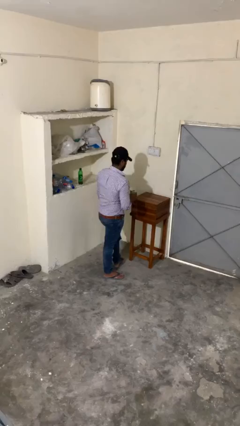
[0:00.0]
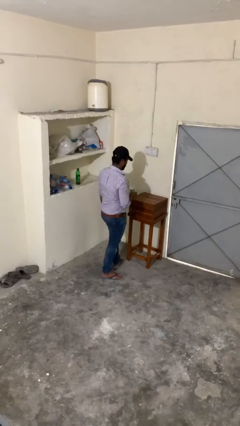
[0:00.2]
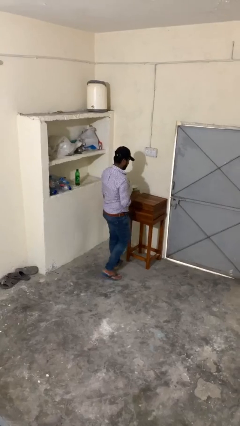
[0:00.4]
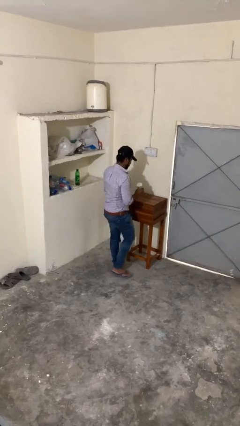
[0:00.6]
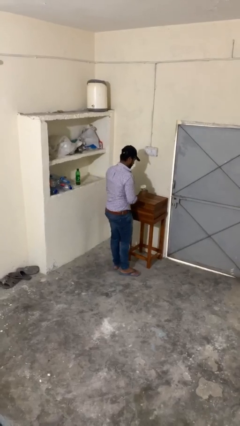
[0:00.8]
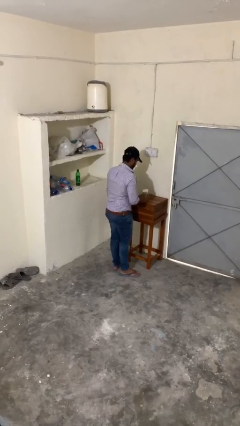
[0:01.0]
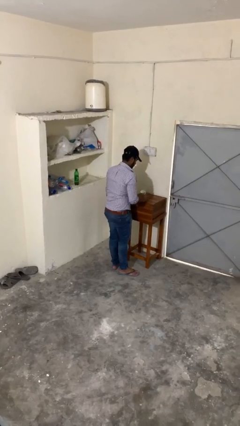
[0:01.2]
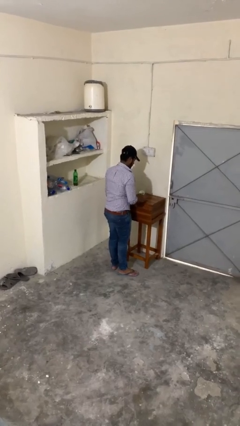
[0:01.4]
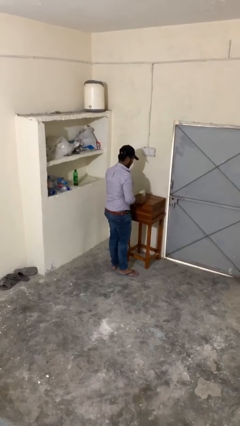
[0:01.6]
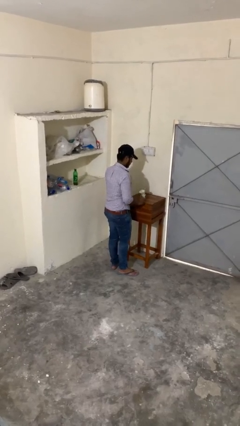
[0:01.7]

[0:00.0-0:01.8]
person puts down object on table

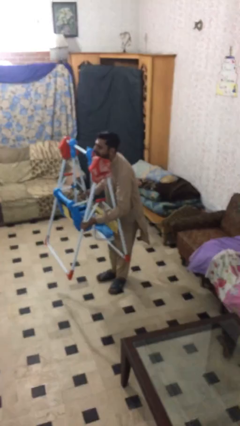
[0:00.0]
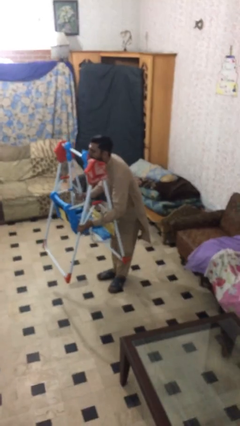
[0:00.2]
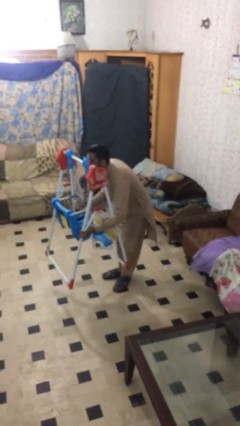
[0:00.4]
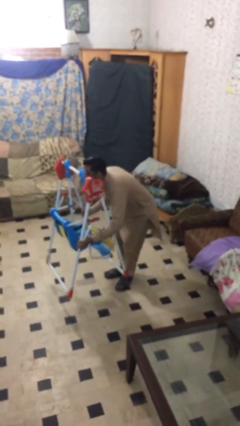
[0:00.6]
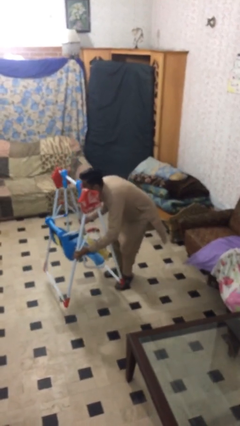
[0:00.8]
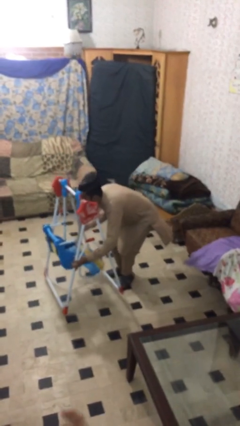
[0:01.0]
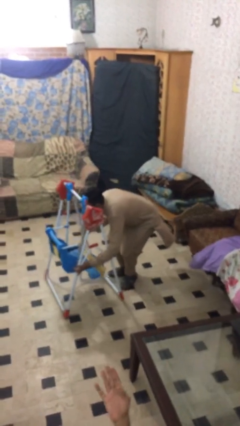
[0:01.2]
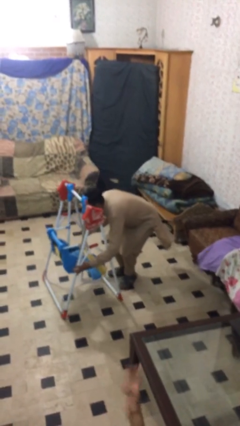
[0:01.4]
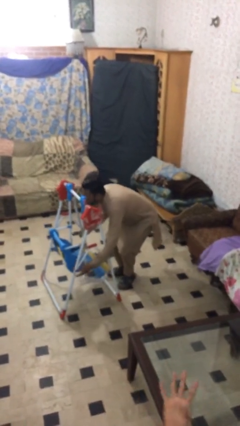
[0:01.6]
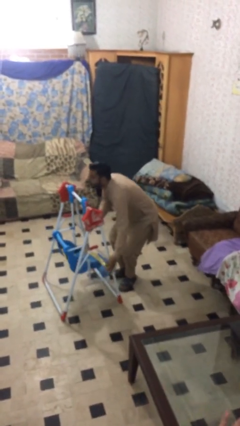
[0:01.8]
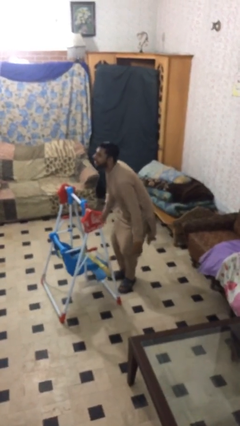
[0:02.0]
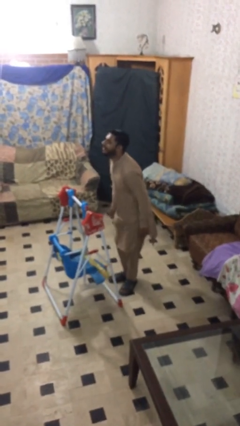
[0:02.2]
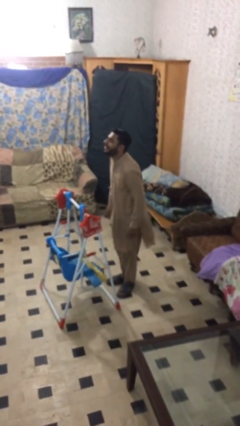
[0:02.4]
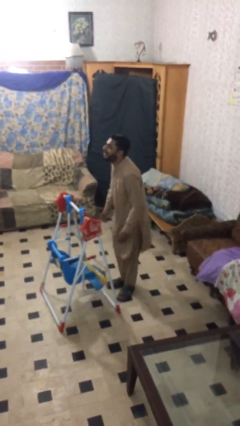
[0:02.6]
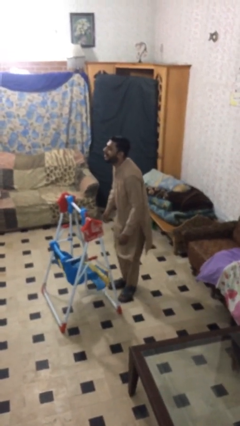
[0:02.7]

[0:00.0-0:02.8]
person puts down object on floor

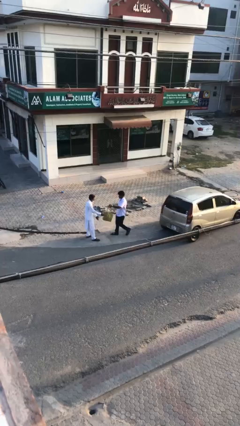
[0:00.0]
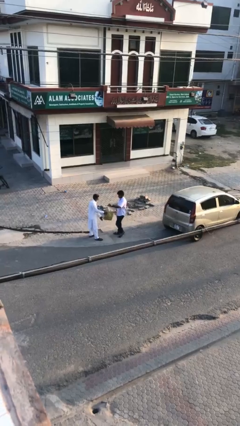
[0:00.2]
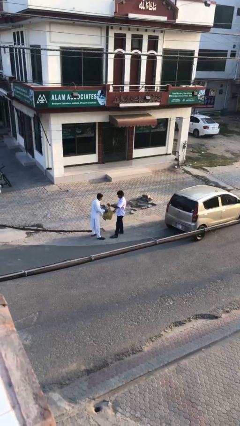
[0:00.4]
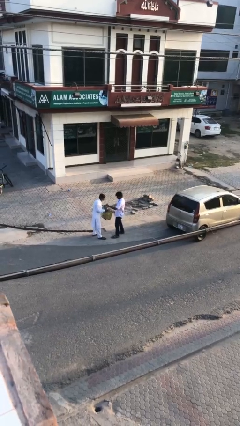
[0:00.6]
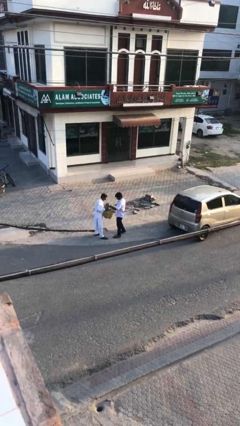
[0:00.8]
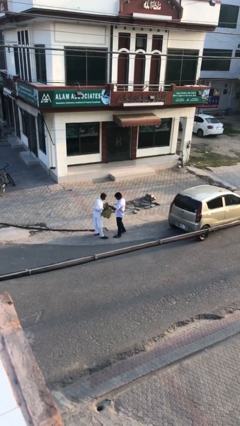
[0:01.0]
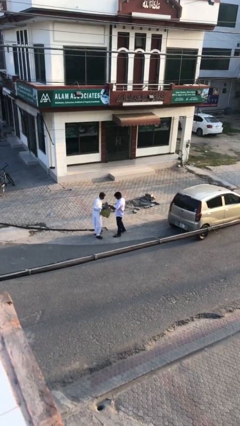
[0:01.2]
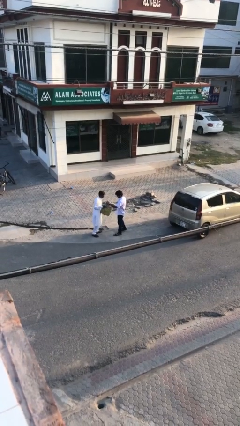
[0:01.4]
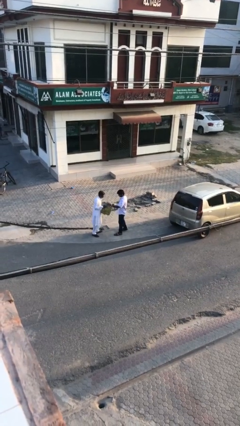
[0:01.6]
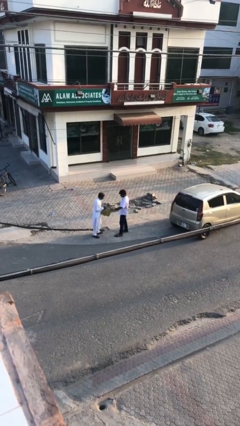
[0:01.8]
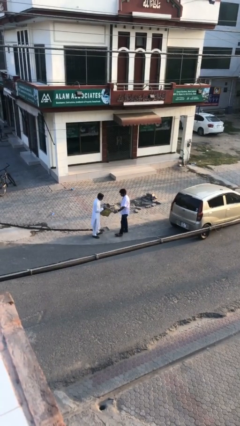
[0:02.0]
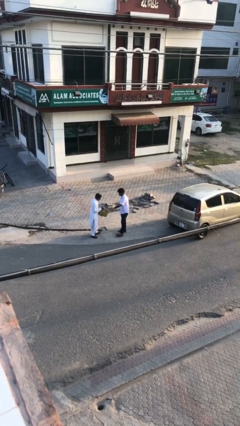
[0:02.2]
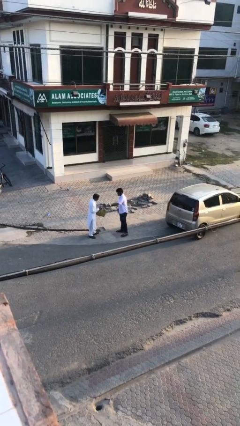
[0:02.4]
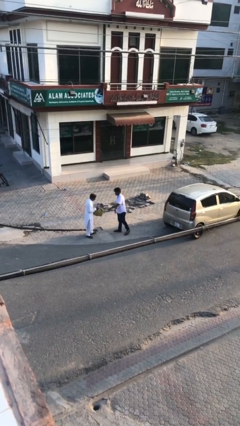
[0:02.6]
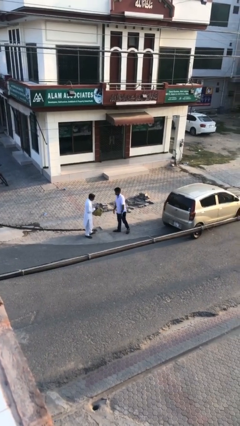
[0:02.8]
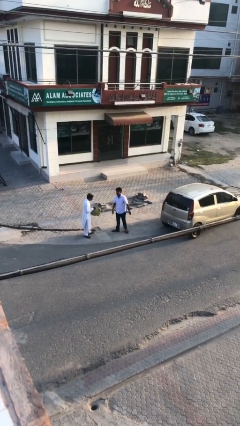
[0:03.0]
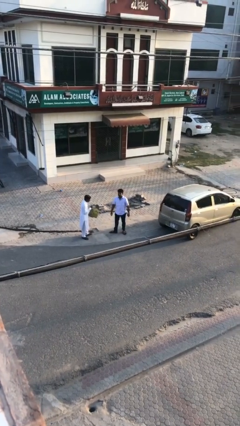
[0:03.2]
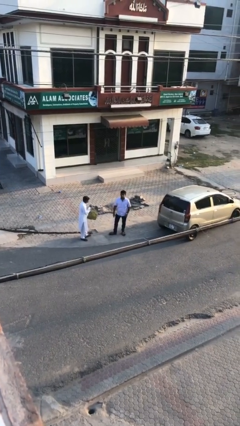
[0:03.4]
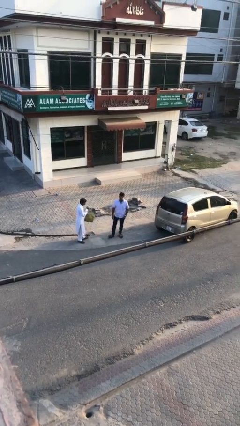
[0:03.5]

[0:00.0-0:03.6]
person transfers object to person

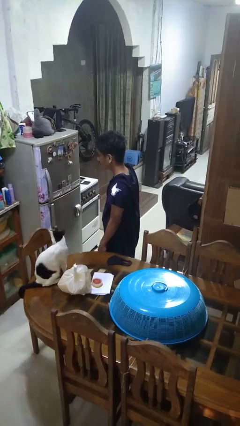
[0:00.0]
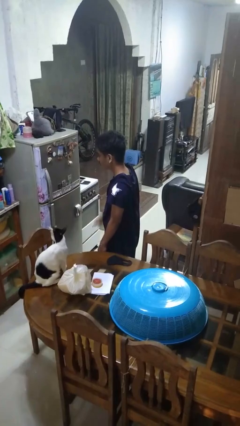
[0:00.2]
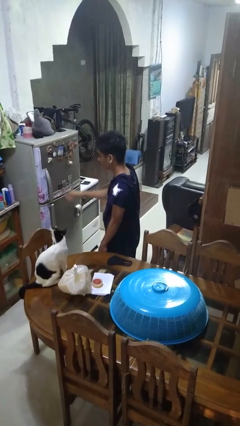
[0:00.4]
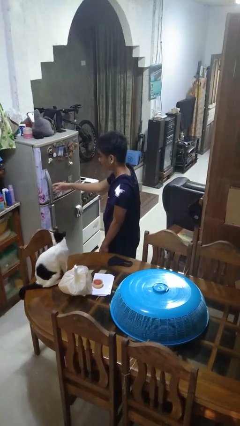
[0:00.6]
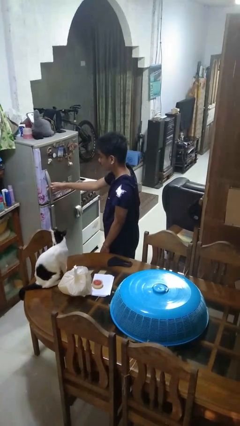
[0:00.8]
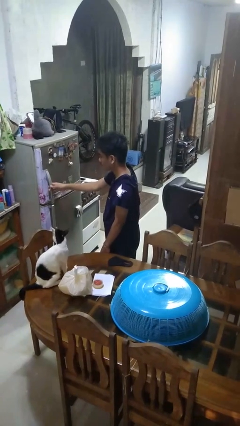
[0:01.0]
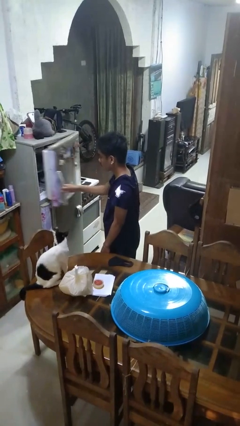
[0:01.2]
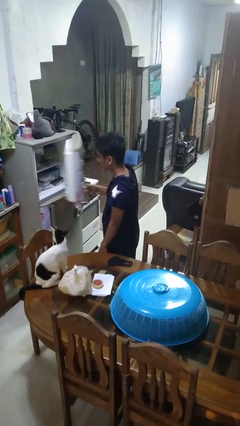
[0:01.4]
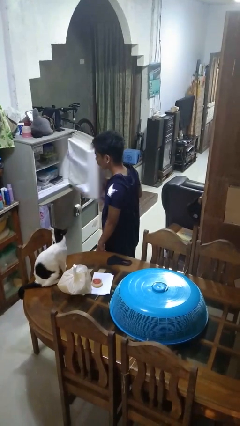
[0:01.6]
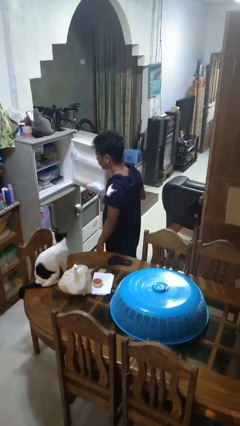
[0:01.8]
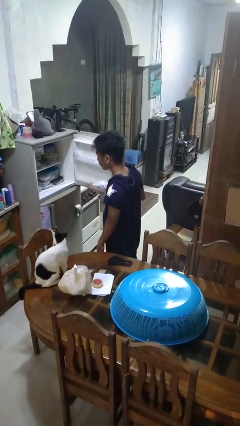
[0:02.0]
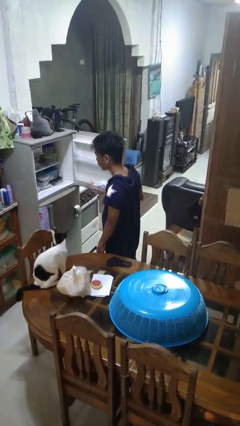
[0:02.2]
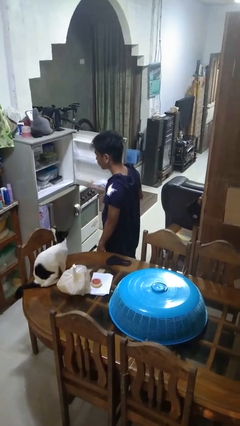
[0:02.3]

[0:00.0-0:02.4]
person opens refrigerator

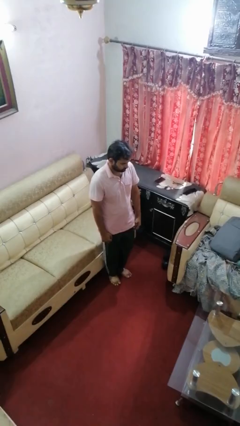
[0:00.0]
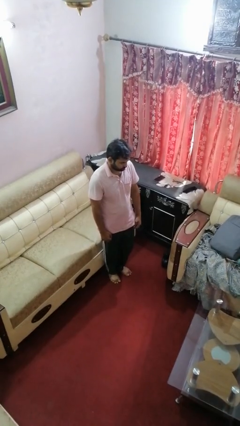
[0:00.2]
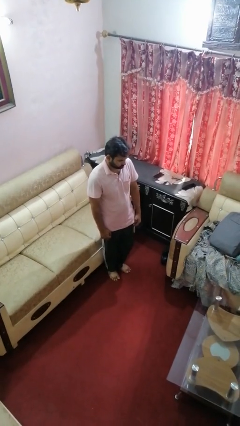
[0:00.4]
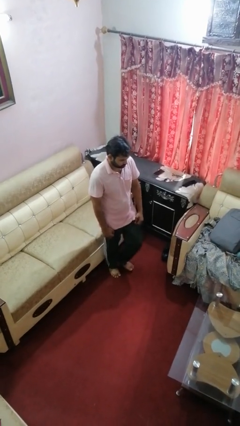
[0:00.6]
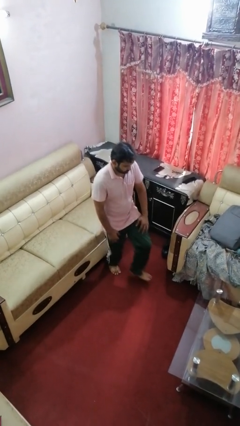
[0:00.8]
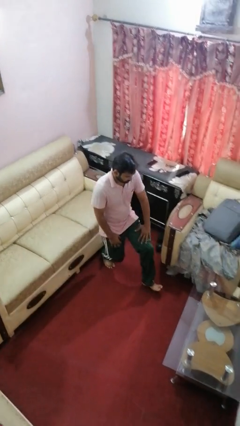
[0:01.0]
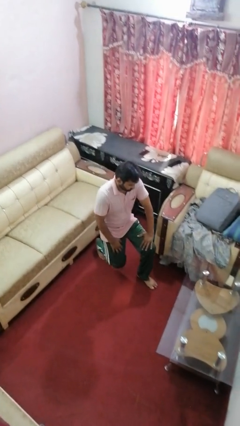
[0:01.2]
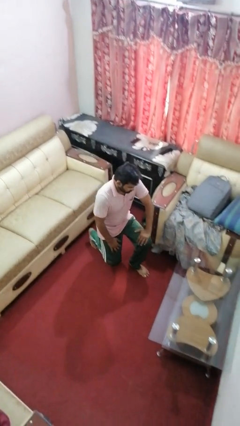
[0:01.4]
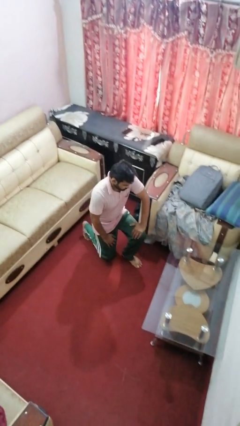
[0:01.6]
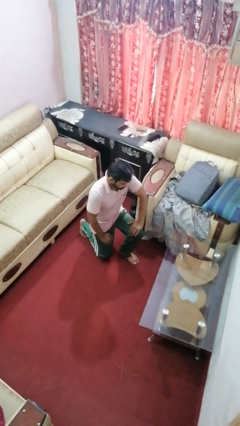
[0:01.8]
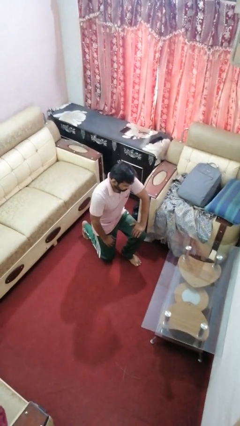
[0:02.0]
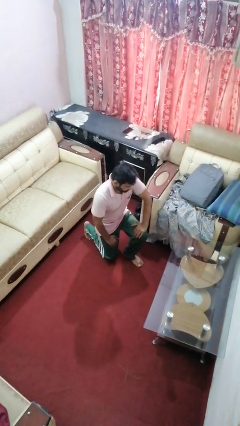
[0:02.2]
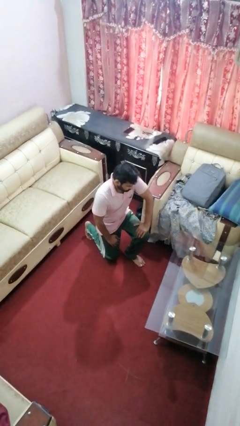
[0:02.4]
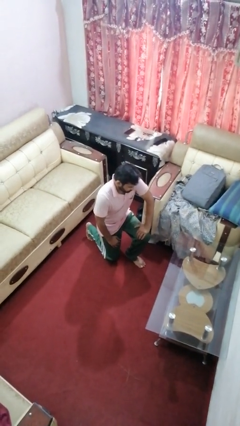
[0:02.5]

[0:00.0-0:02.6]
person kneels

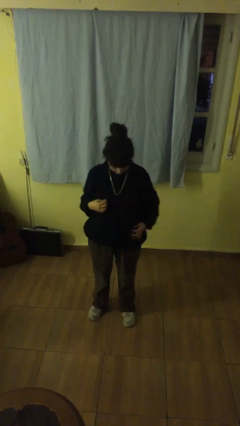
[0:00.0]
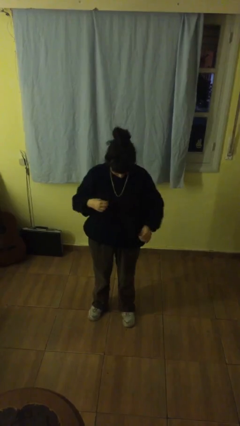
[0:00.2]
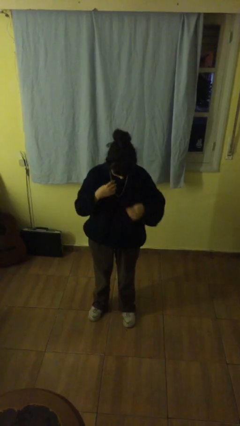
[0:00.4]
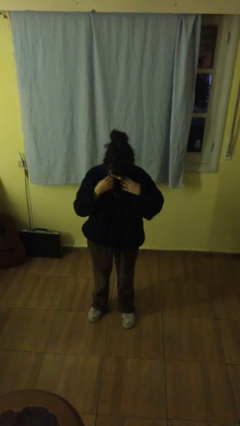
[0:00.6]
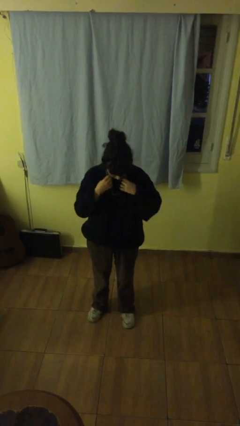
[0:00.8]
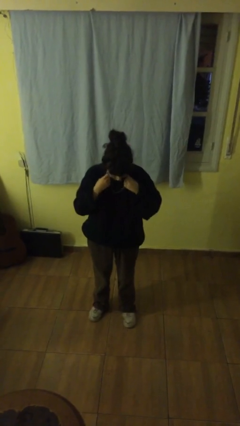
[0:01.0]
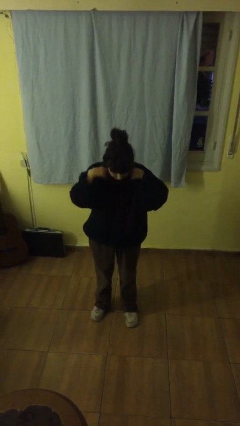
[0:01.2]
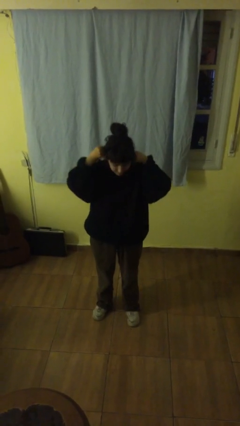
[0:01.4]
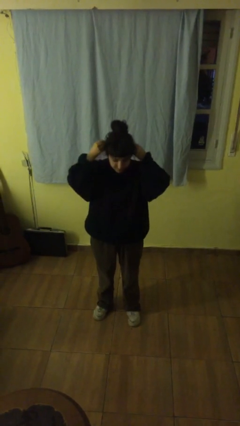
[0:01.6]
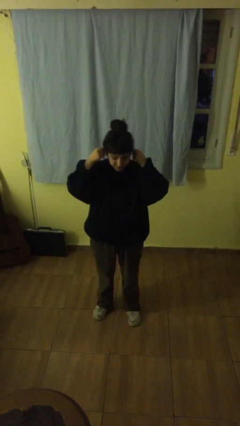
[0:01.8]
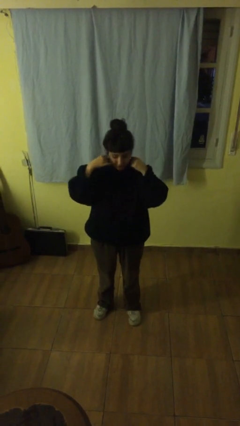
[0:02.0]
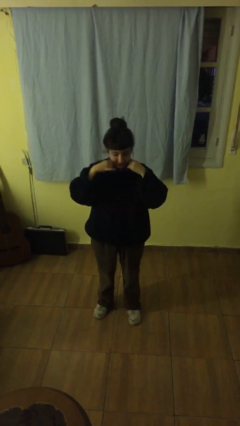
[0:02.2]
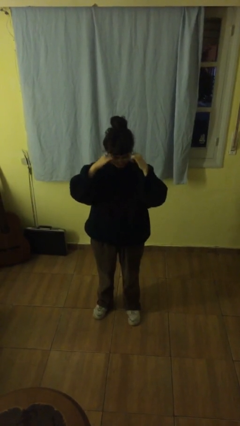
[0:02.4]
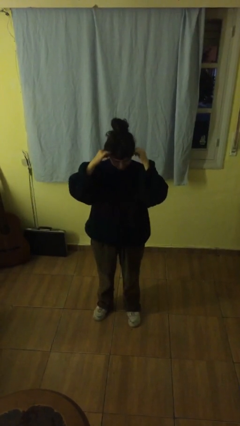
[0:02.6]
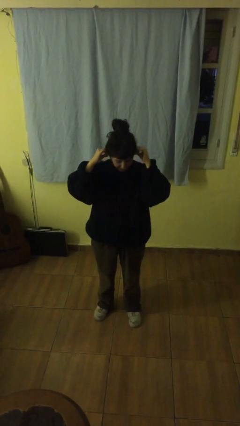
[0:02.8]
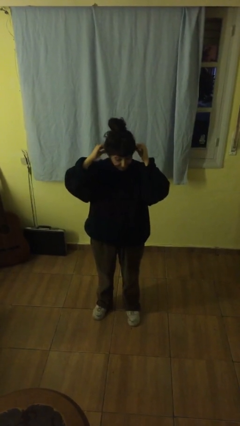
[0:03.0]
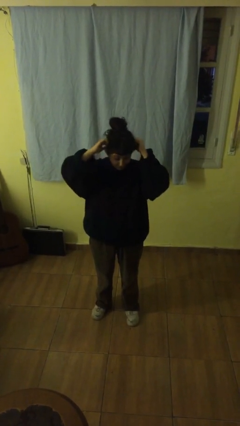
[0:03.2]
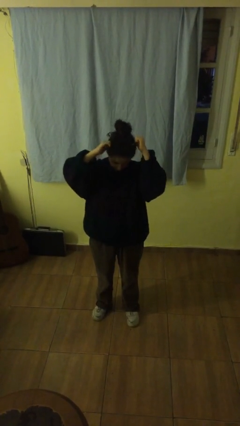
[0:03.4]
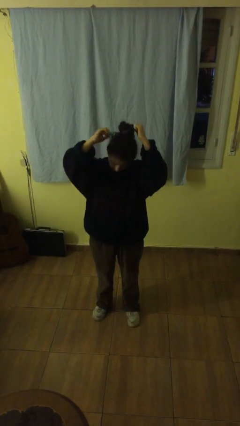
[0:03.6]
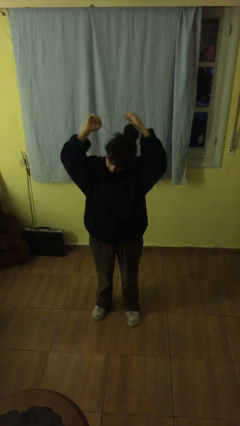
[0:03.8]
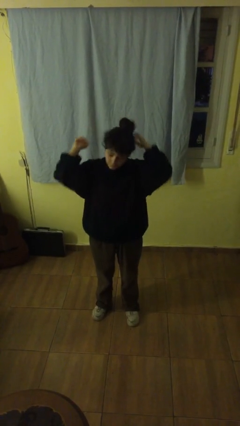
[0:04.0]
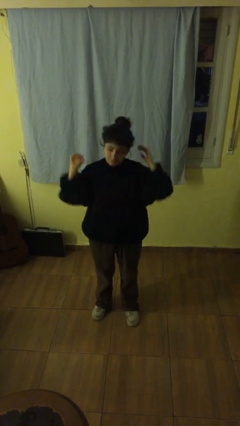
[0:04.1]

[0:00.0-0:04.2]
person takes off necklace
